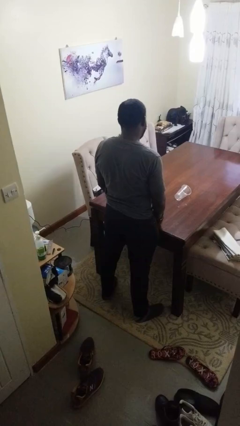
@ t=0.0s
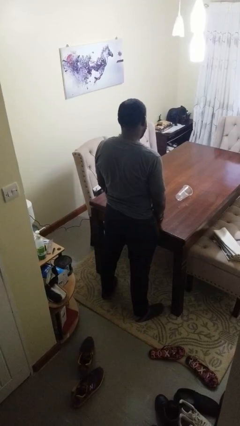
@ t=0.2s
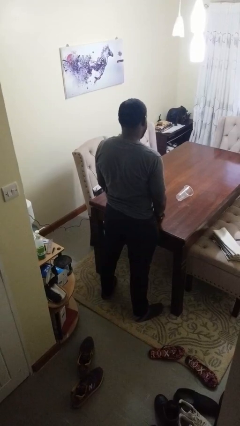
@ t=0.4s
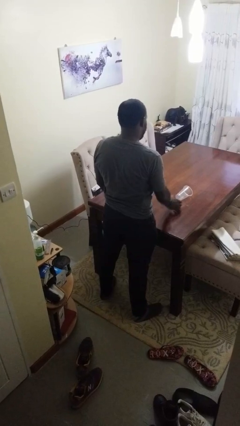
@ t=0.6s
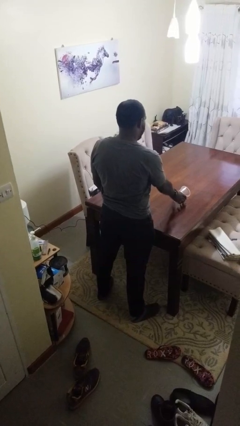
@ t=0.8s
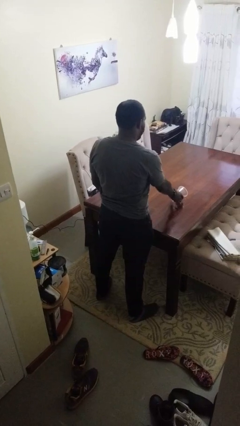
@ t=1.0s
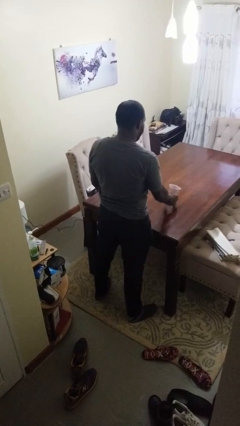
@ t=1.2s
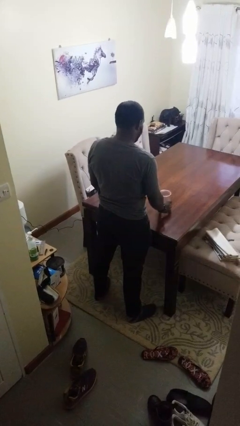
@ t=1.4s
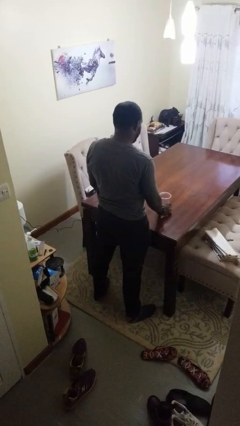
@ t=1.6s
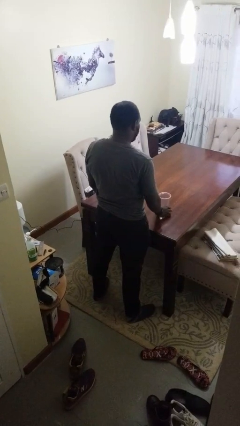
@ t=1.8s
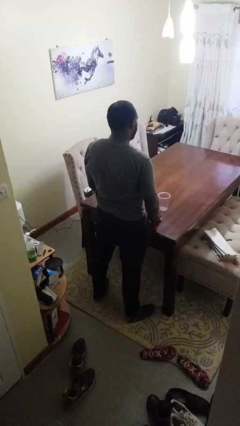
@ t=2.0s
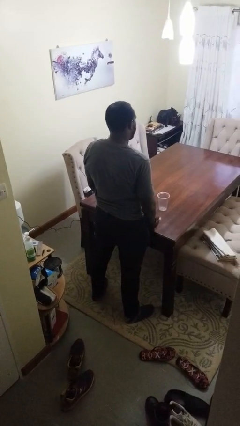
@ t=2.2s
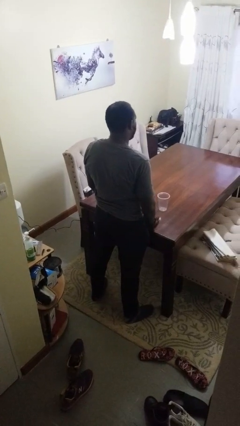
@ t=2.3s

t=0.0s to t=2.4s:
person sets upright glass

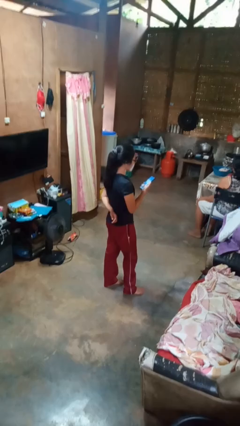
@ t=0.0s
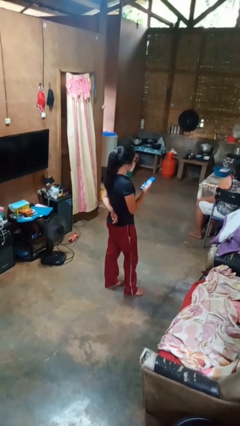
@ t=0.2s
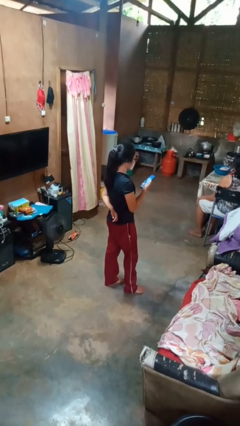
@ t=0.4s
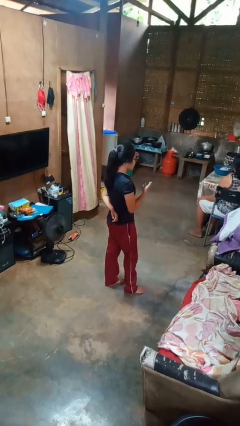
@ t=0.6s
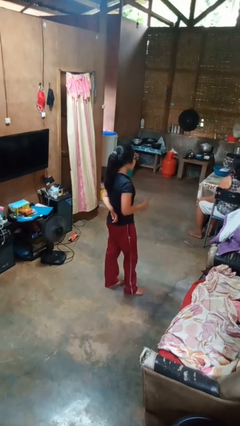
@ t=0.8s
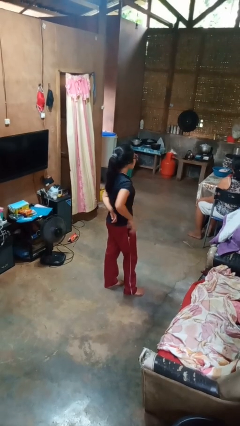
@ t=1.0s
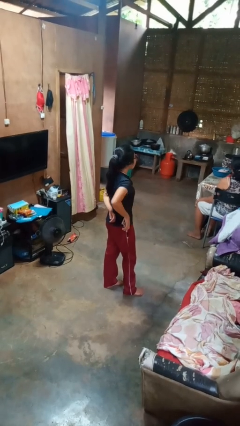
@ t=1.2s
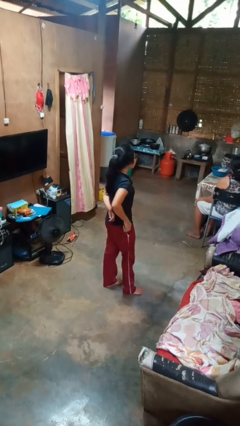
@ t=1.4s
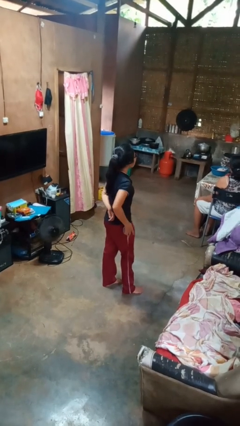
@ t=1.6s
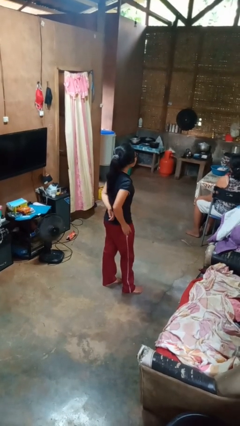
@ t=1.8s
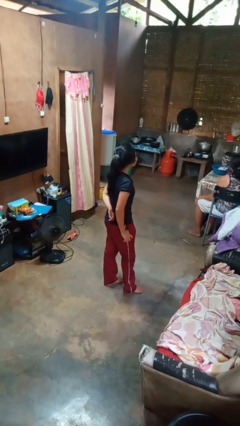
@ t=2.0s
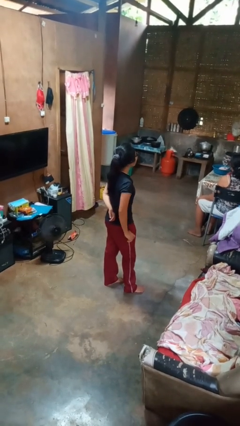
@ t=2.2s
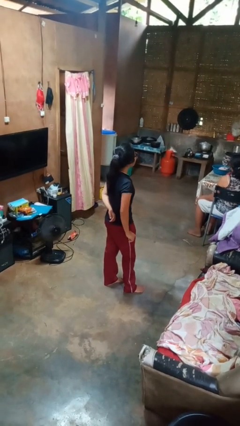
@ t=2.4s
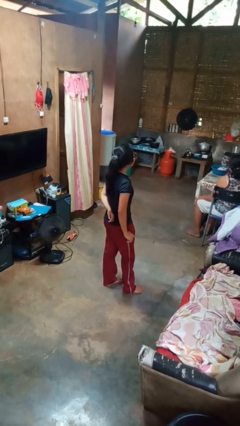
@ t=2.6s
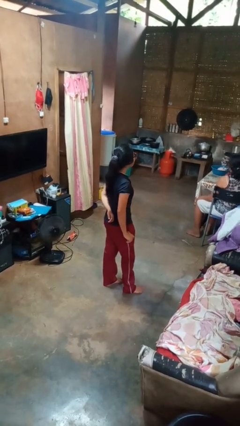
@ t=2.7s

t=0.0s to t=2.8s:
person puts phone into pocket

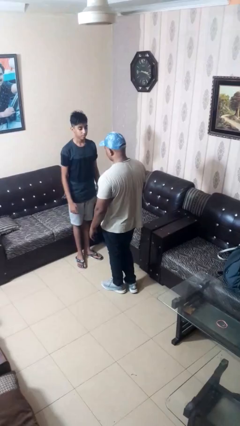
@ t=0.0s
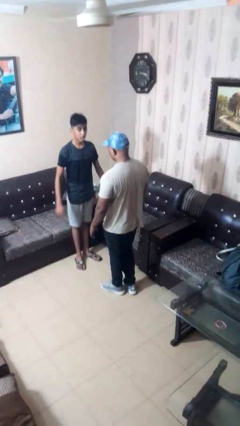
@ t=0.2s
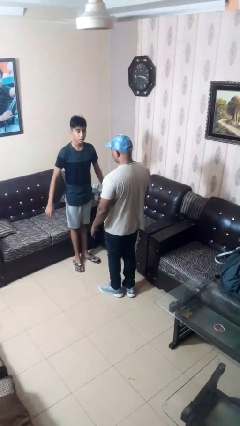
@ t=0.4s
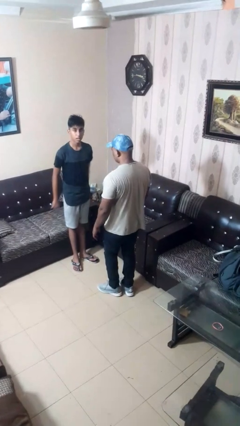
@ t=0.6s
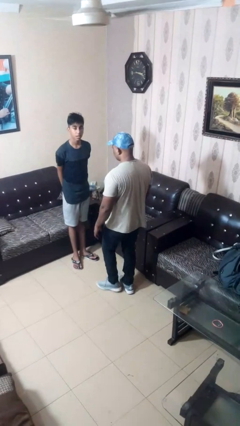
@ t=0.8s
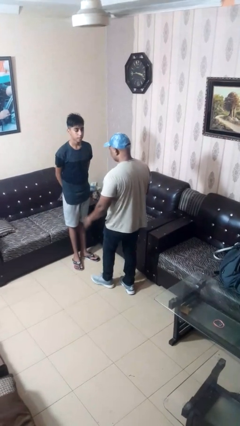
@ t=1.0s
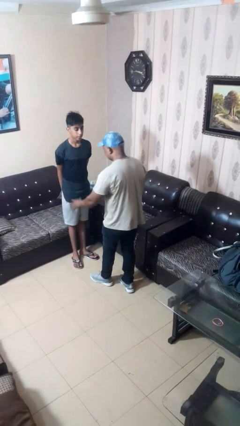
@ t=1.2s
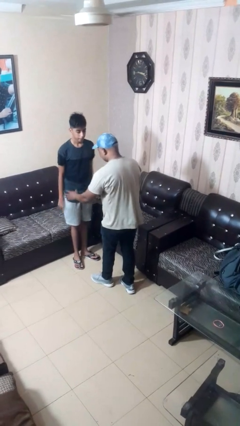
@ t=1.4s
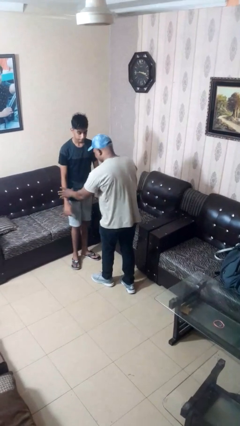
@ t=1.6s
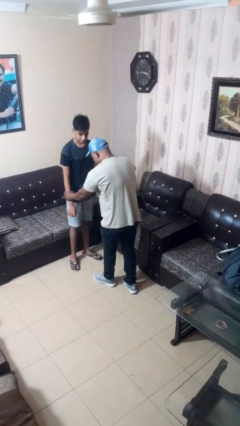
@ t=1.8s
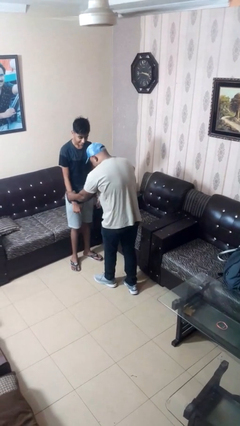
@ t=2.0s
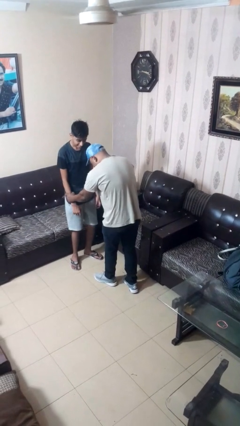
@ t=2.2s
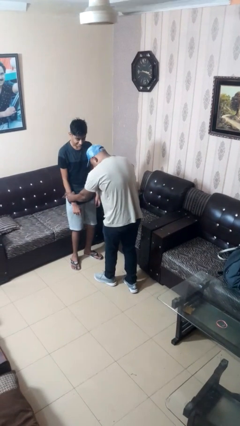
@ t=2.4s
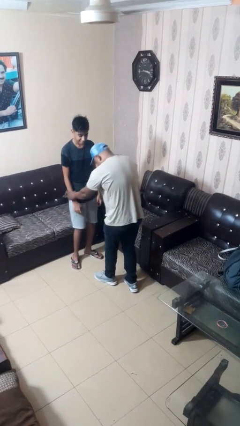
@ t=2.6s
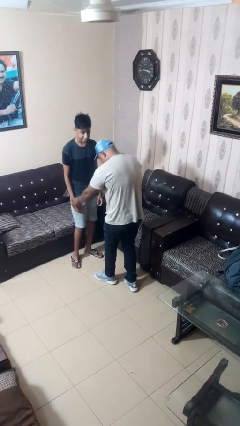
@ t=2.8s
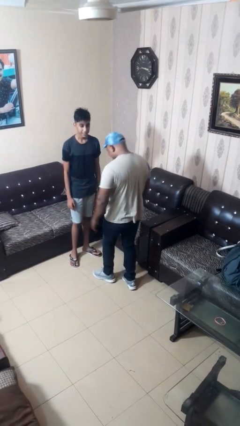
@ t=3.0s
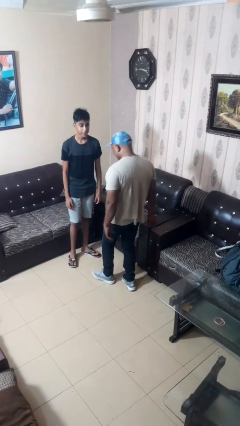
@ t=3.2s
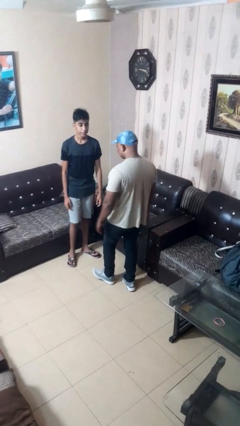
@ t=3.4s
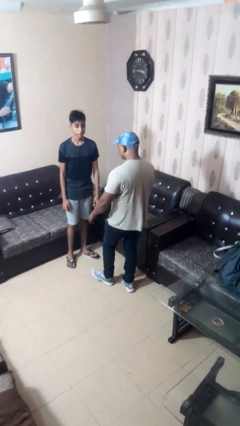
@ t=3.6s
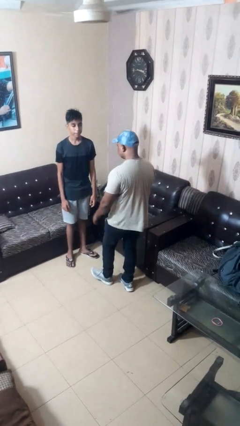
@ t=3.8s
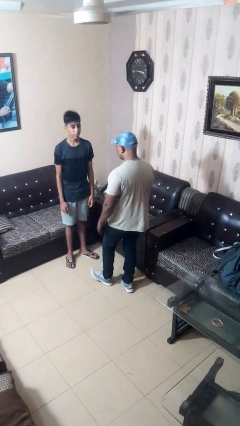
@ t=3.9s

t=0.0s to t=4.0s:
person grabs person by forearm

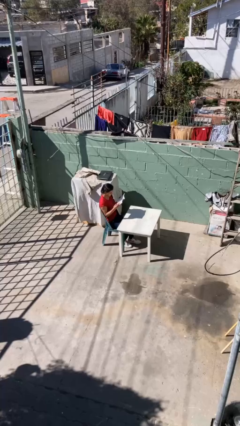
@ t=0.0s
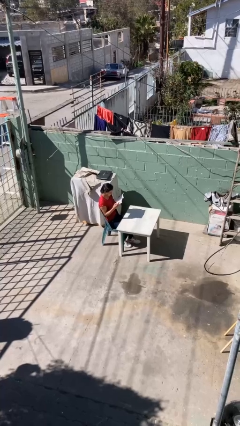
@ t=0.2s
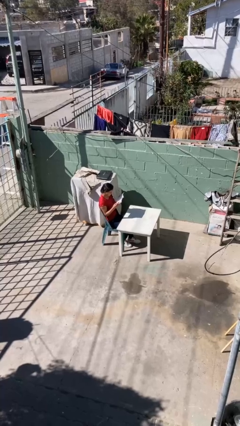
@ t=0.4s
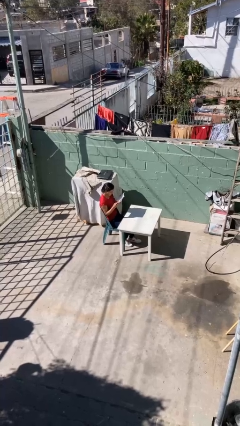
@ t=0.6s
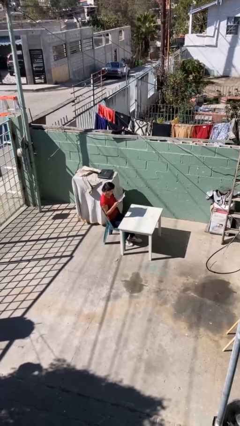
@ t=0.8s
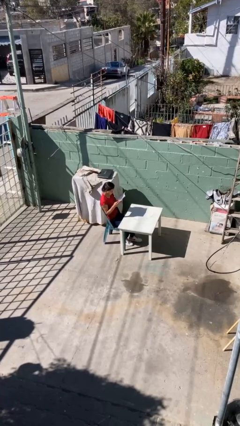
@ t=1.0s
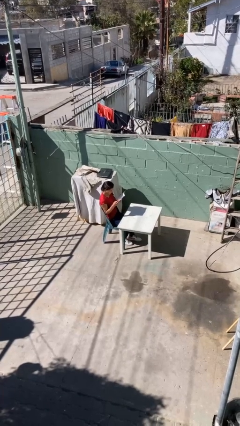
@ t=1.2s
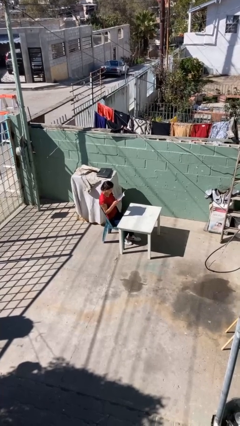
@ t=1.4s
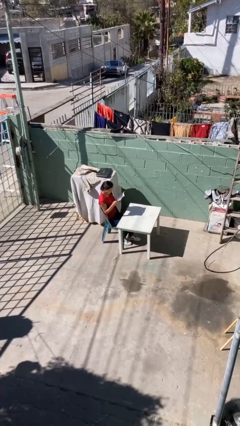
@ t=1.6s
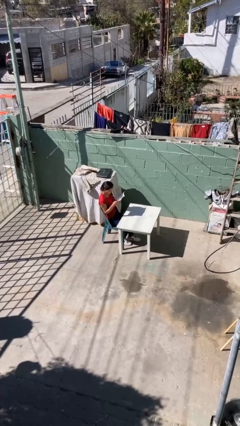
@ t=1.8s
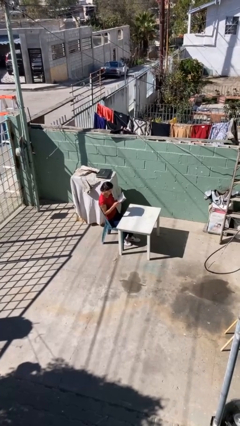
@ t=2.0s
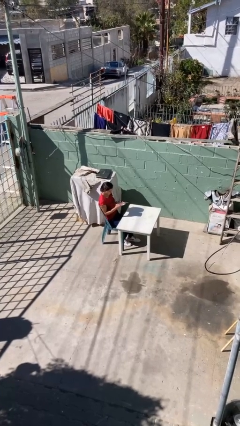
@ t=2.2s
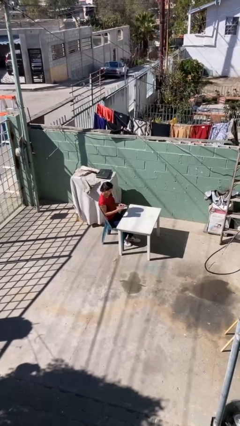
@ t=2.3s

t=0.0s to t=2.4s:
person reads document

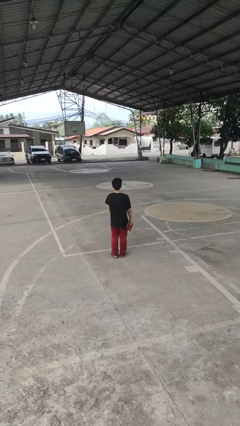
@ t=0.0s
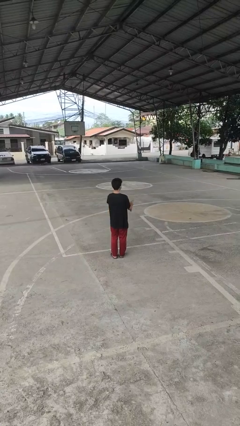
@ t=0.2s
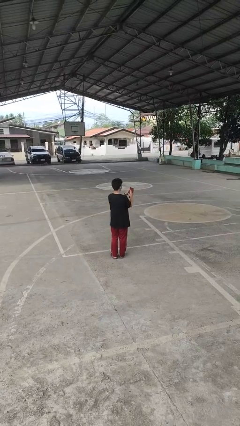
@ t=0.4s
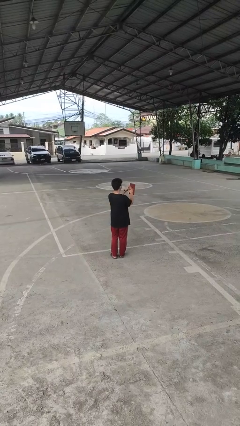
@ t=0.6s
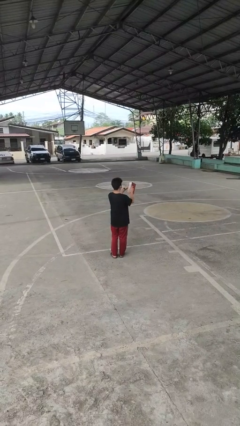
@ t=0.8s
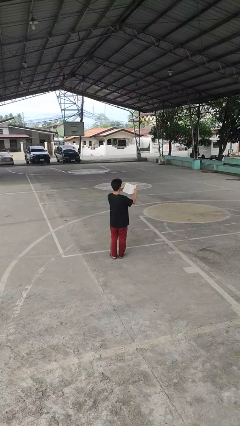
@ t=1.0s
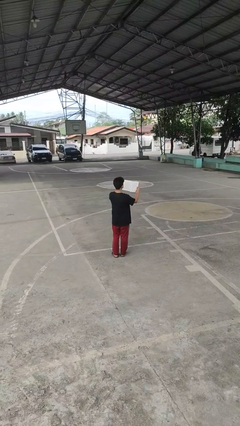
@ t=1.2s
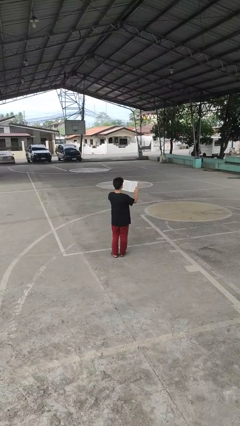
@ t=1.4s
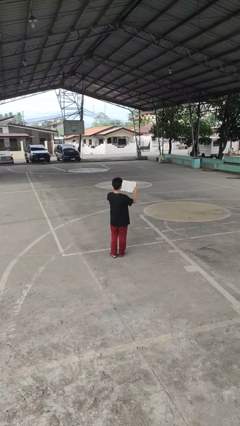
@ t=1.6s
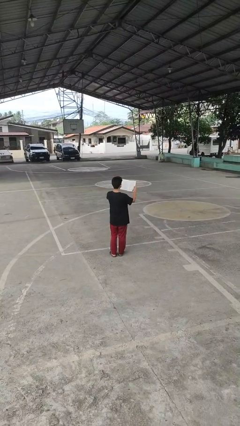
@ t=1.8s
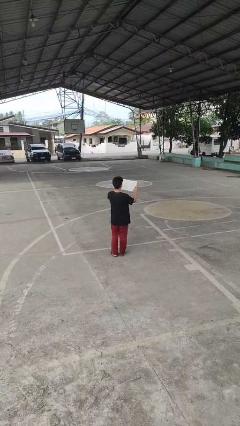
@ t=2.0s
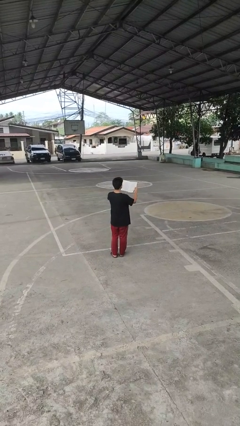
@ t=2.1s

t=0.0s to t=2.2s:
person reads book

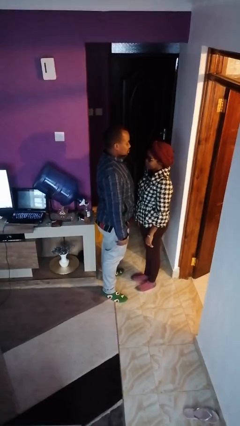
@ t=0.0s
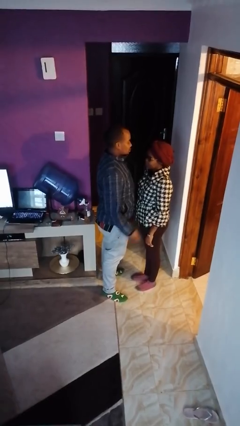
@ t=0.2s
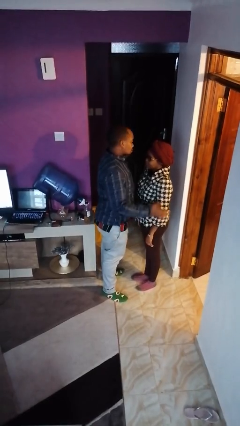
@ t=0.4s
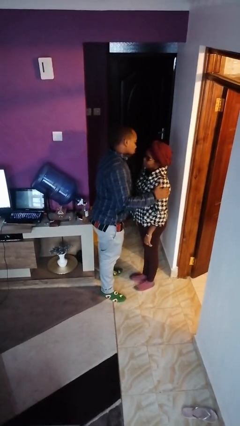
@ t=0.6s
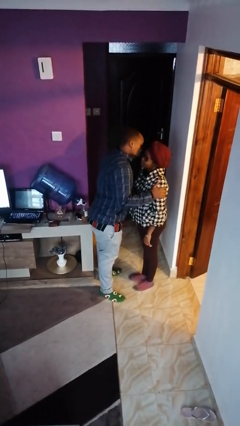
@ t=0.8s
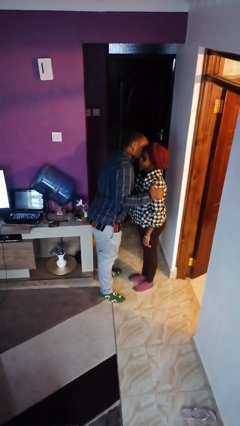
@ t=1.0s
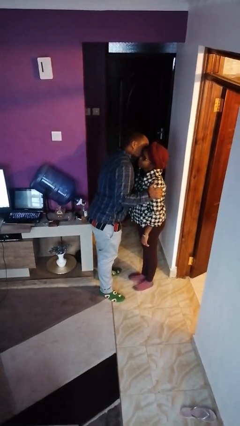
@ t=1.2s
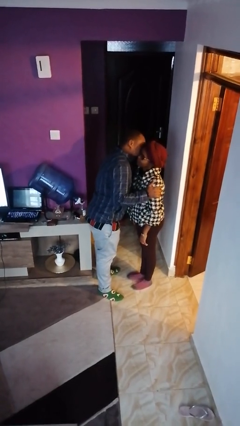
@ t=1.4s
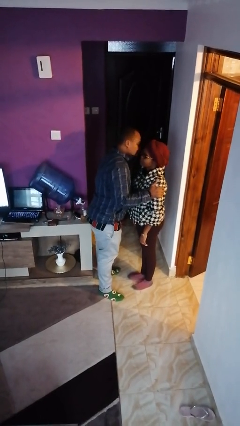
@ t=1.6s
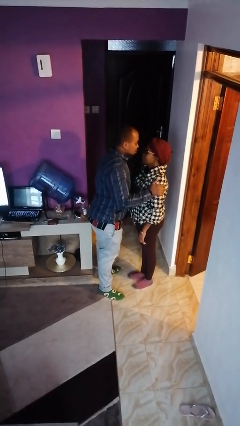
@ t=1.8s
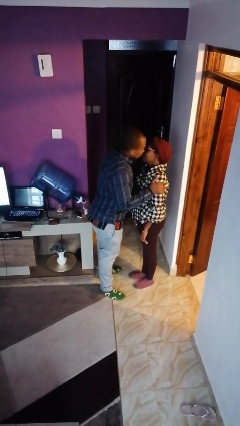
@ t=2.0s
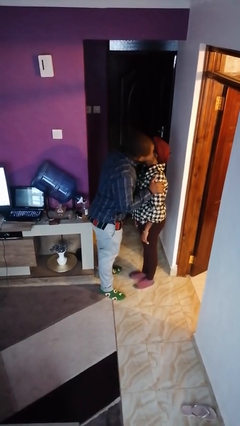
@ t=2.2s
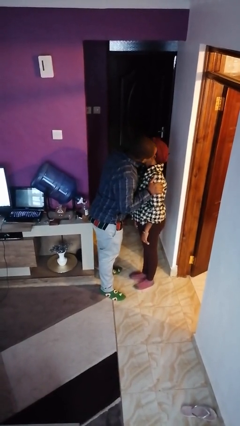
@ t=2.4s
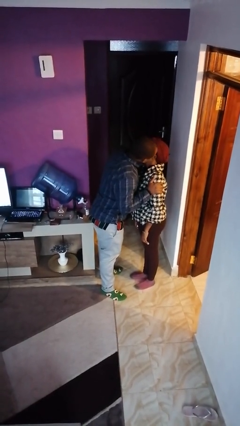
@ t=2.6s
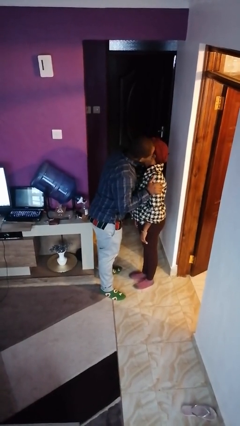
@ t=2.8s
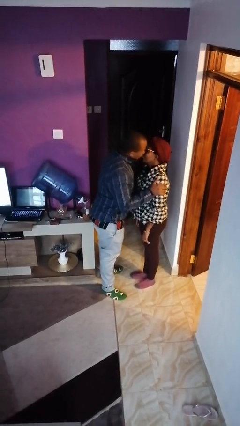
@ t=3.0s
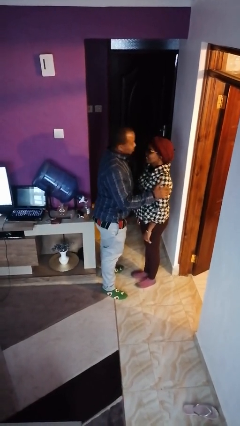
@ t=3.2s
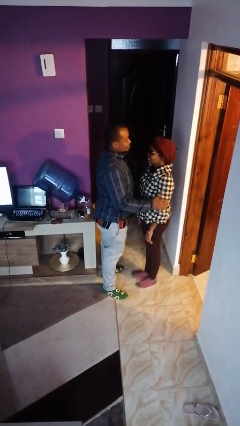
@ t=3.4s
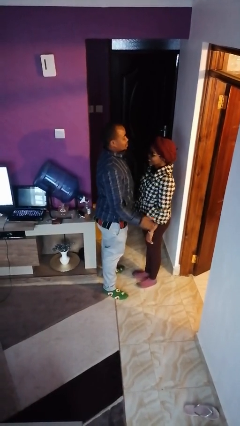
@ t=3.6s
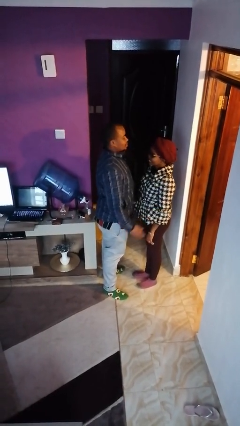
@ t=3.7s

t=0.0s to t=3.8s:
person kisses cheek of person
